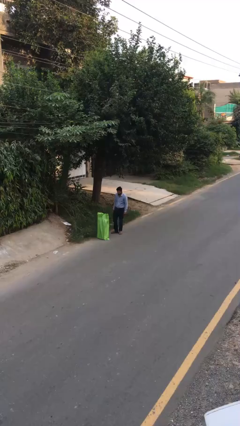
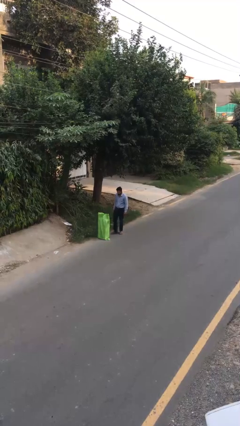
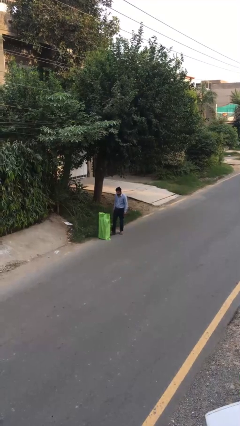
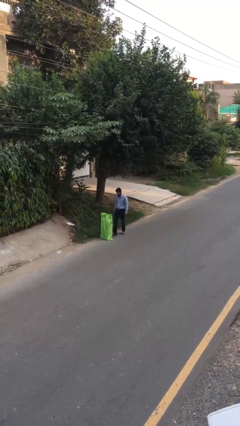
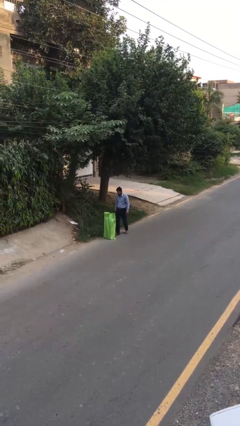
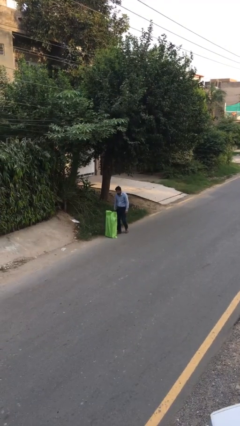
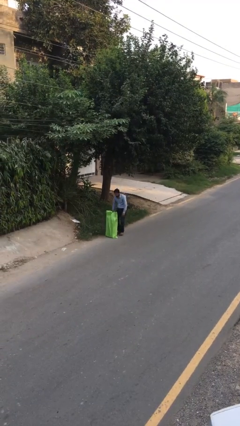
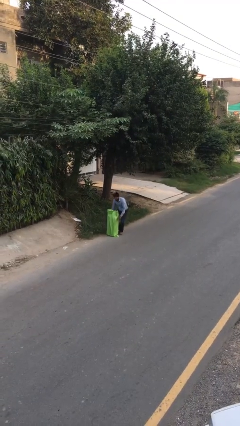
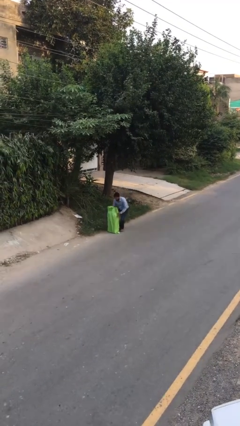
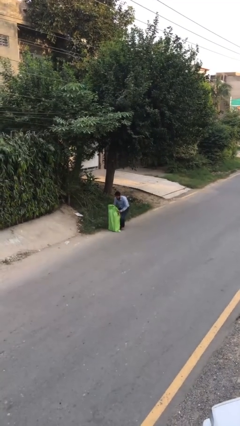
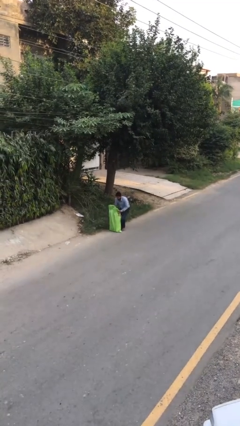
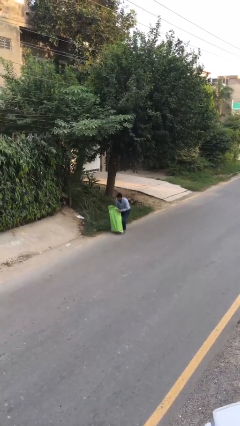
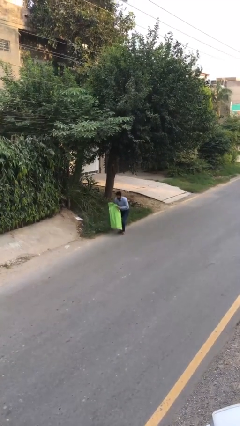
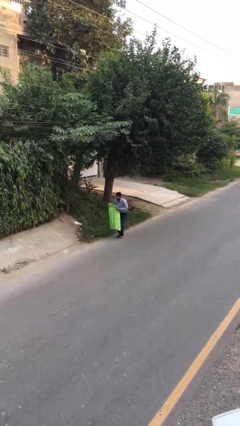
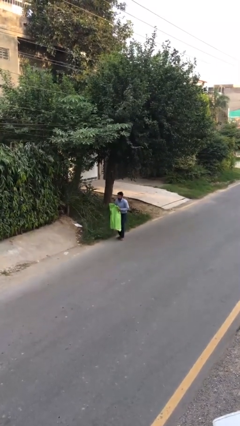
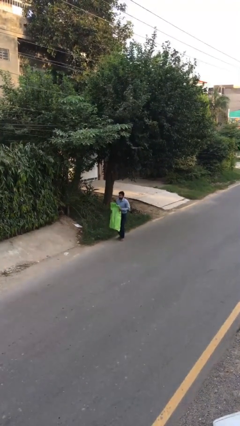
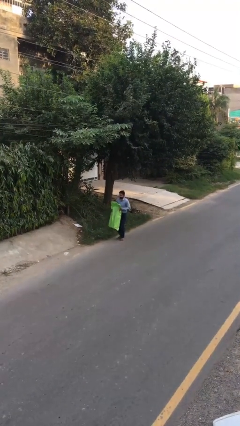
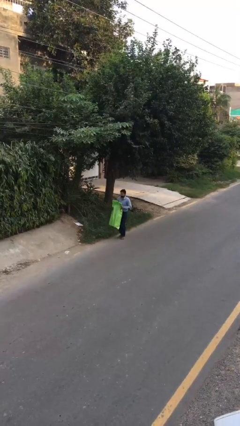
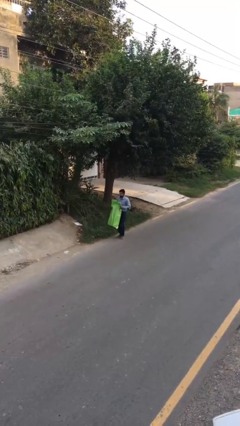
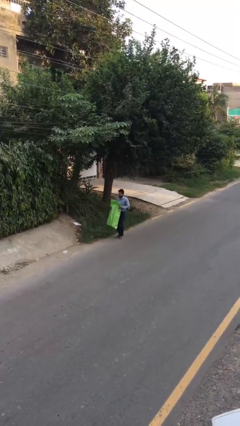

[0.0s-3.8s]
person picks up object from floor

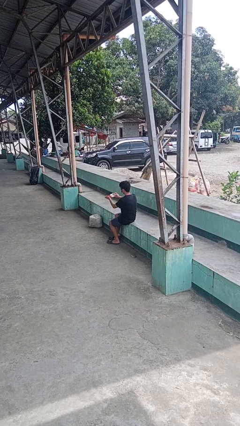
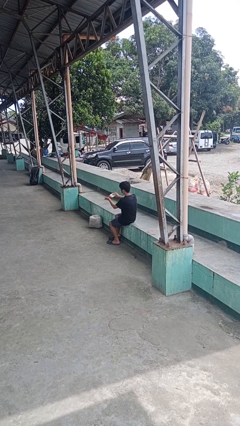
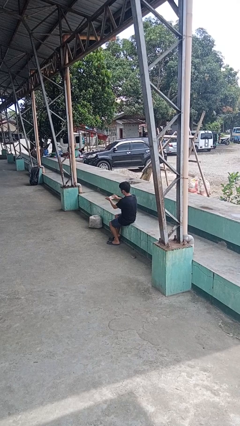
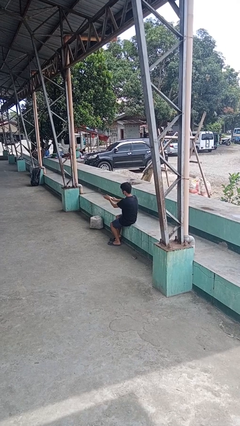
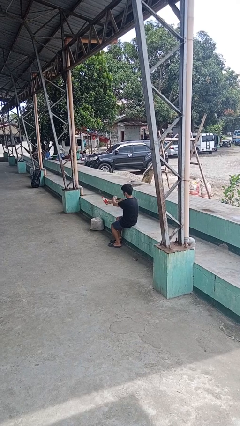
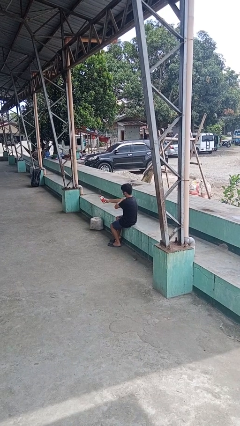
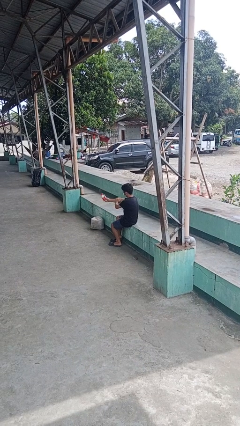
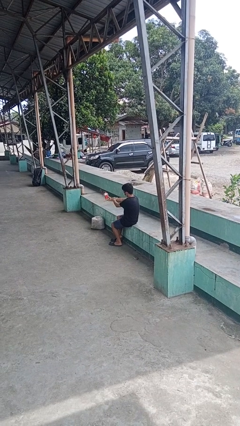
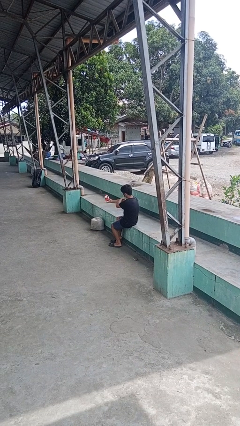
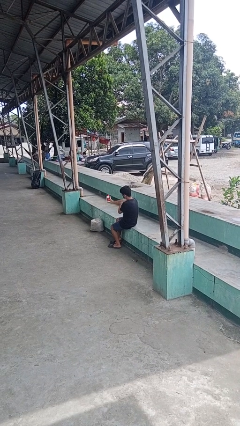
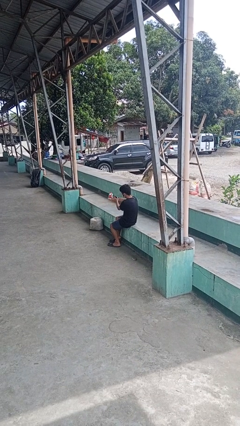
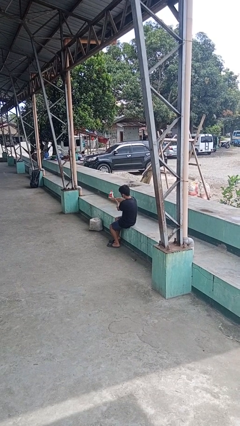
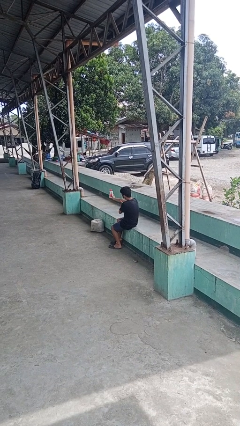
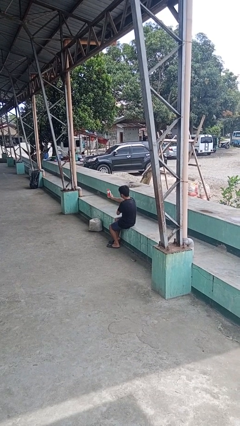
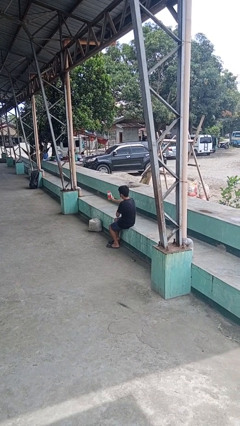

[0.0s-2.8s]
person applies sunscreen

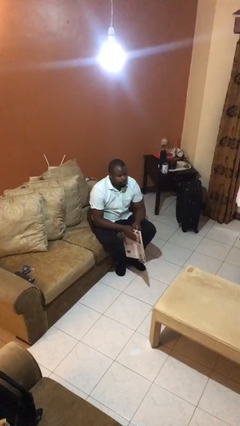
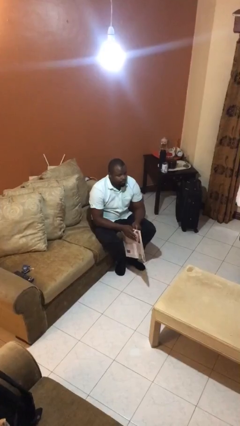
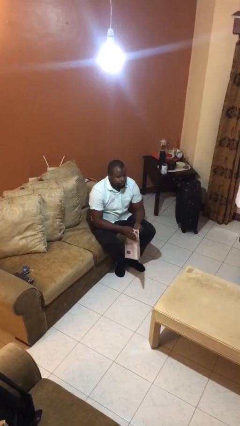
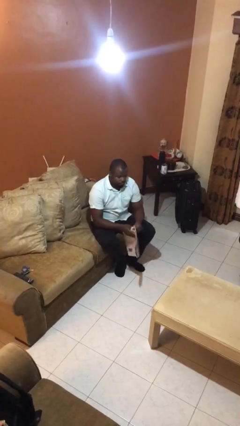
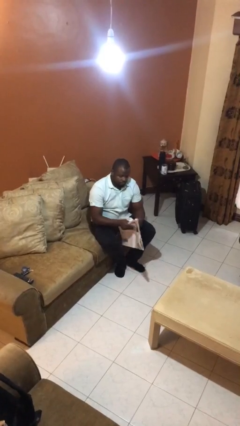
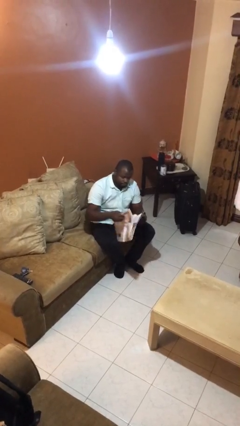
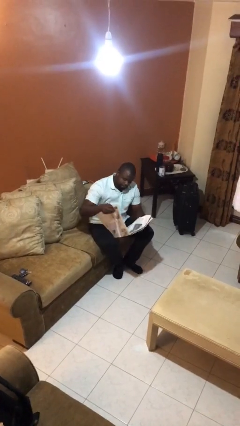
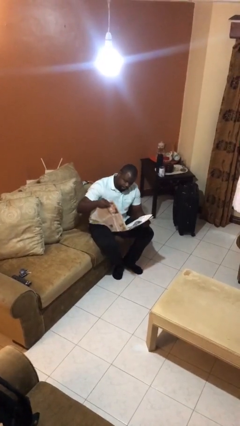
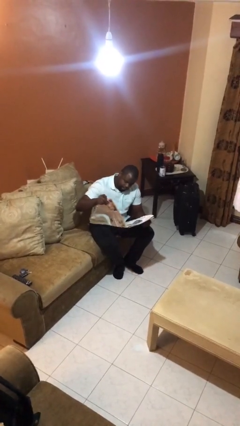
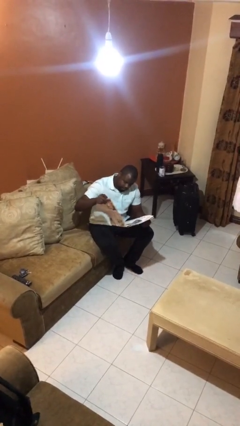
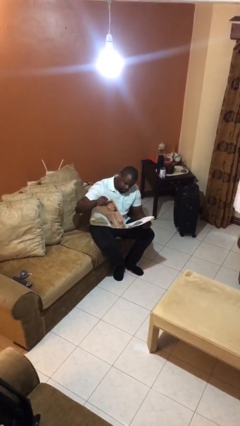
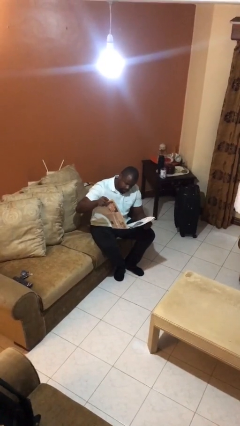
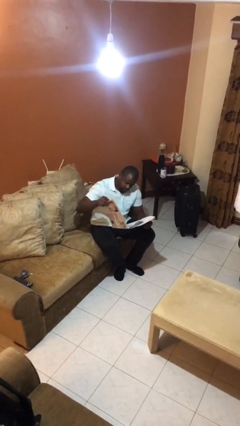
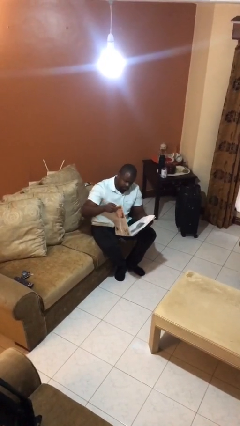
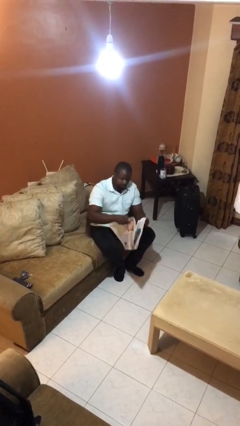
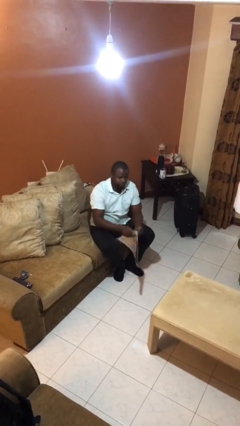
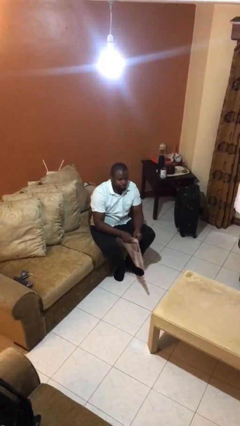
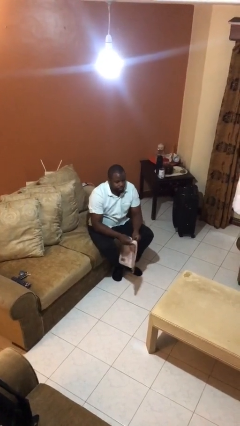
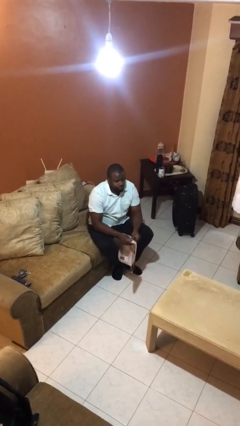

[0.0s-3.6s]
person reads newspaper

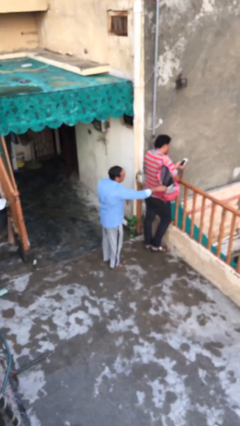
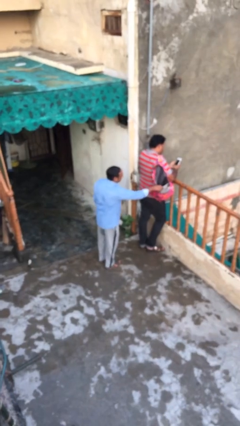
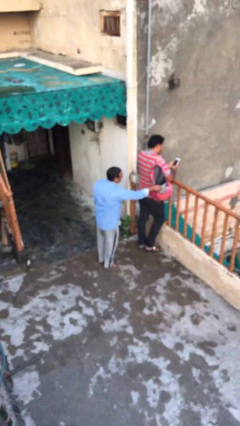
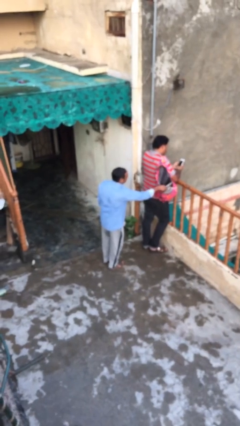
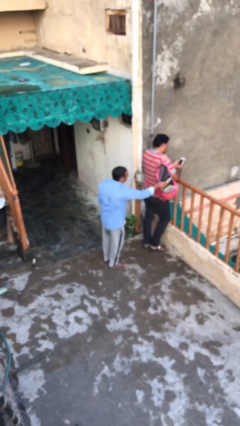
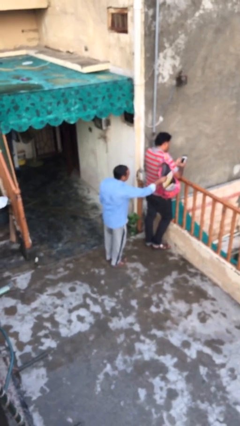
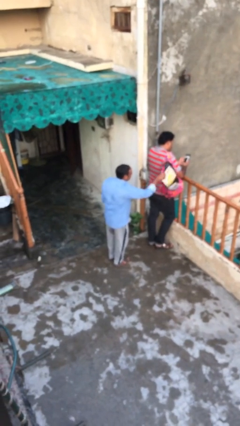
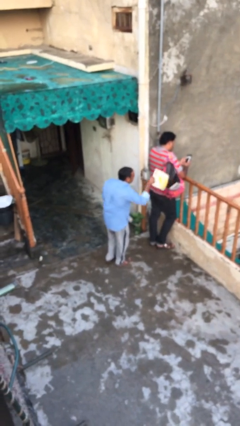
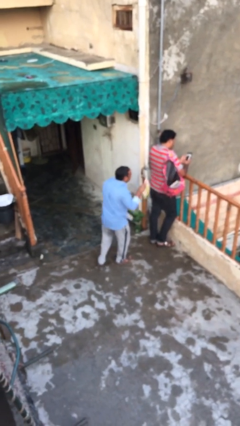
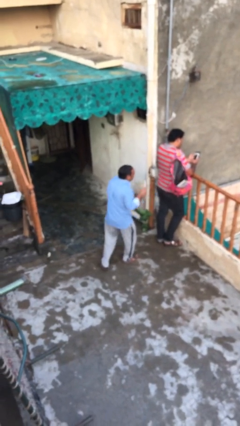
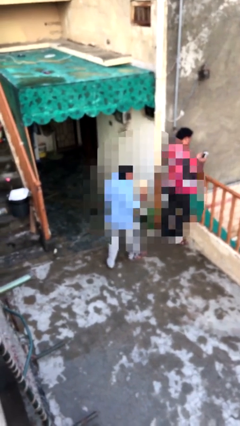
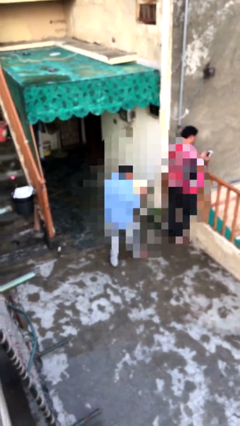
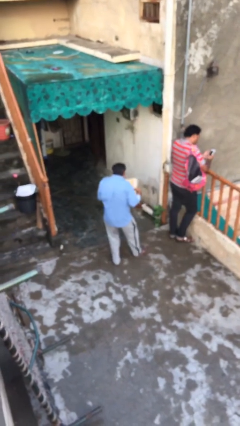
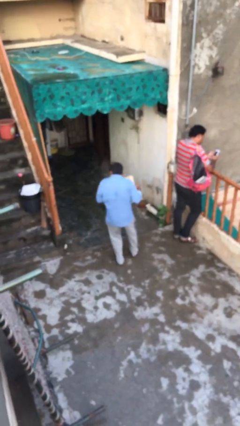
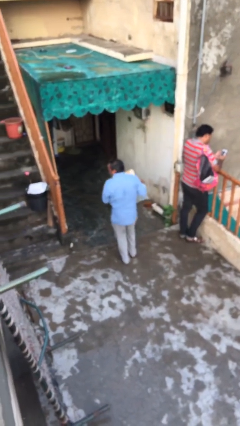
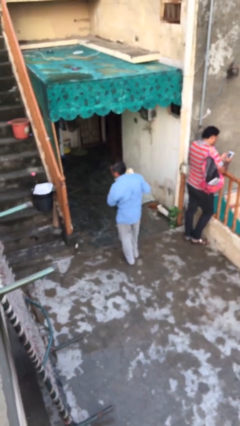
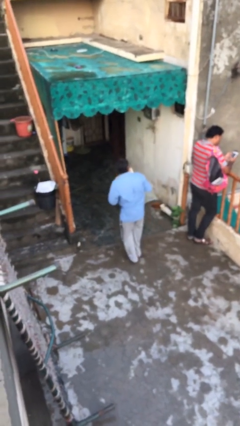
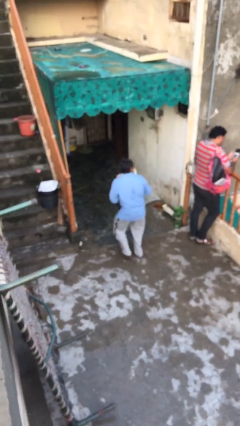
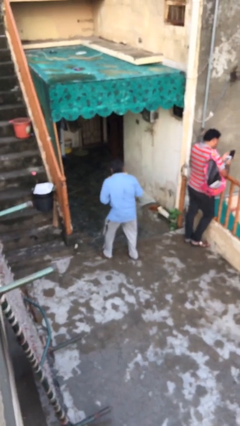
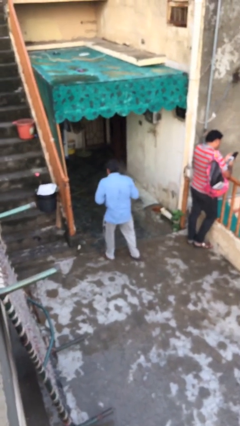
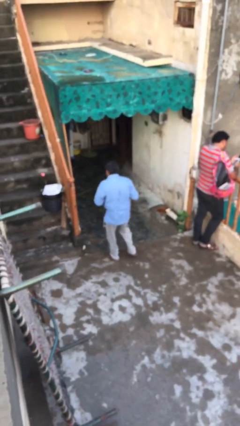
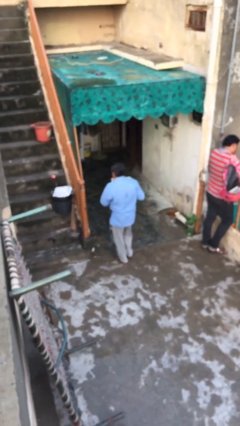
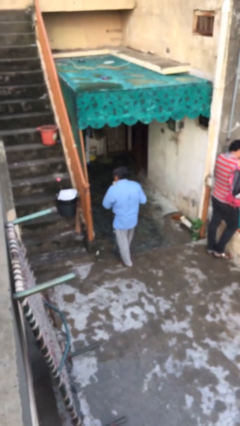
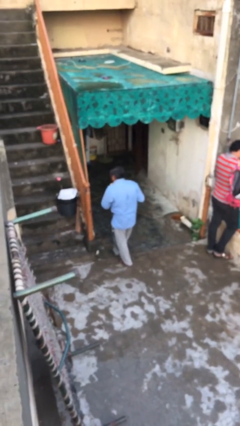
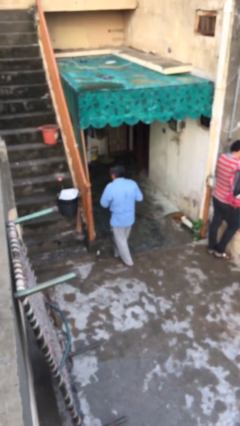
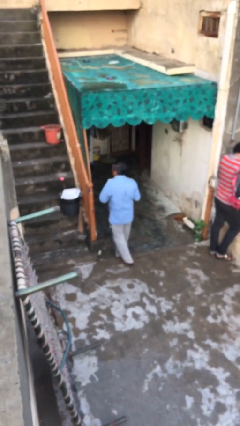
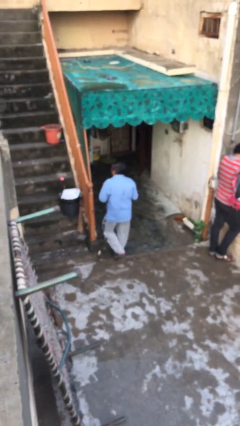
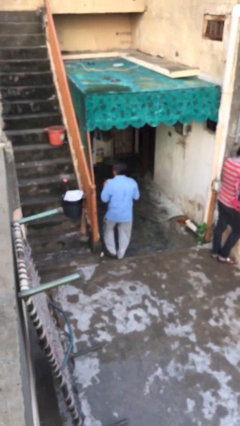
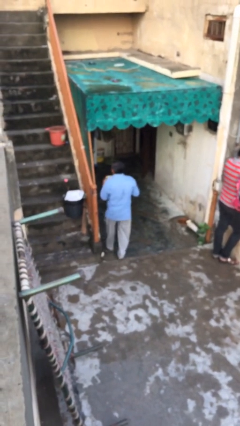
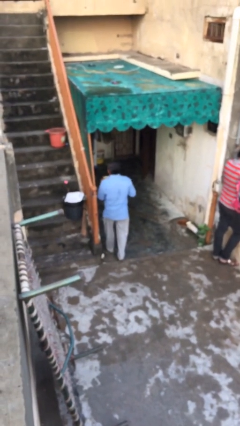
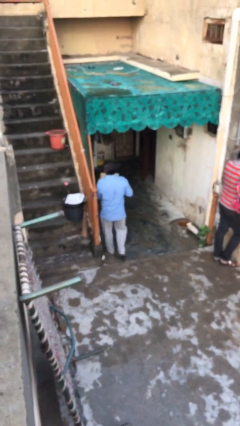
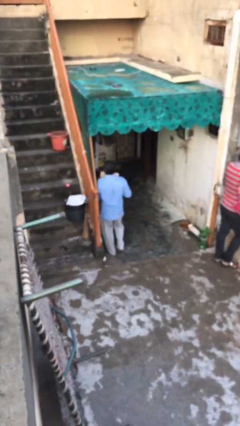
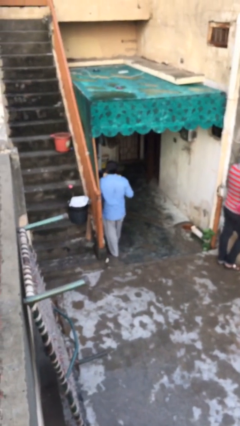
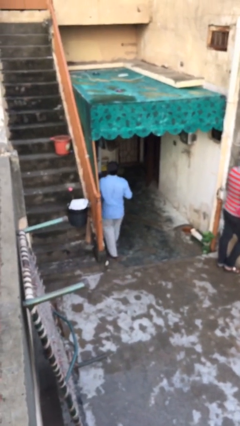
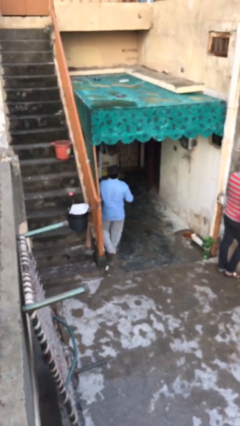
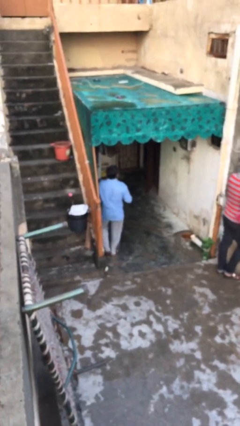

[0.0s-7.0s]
person steals object from person
